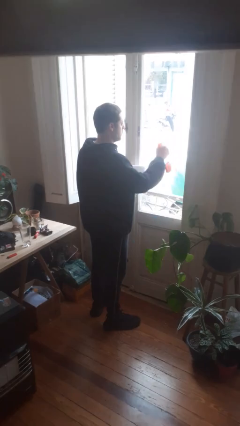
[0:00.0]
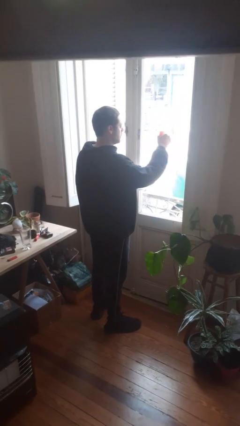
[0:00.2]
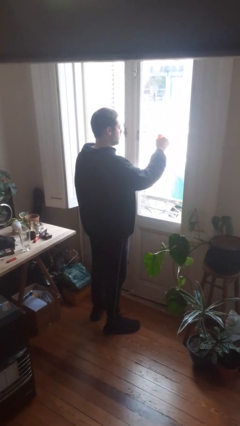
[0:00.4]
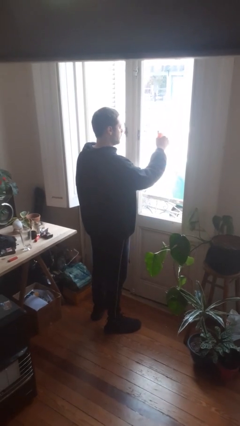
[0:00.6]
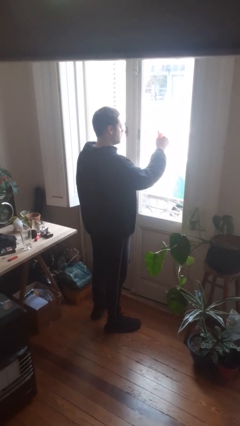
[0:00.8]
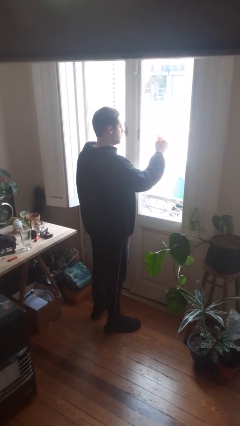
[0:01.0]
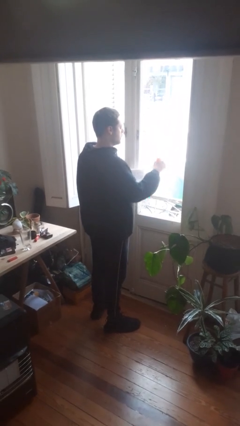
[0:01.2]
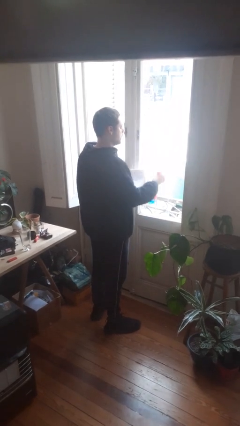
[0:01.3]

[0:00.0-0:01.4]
person sprays from bottle

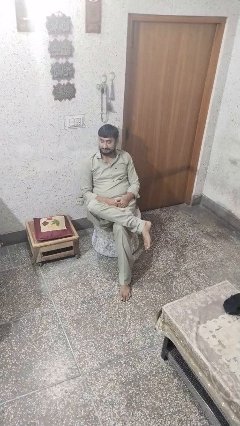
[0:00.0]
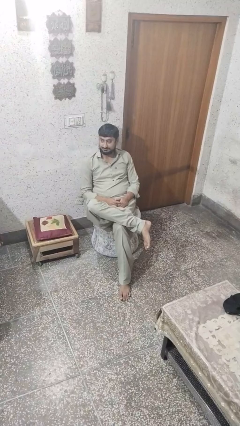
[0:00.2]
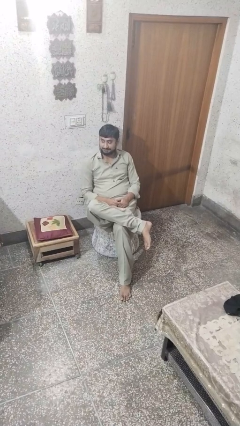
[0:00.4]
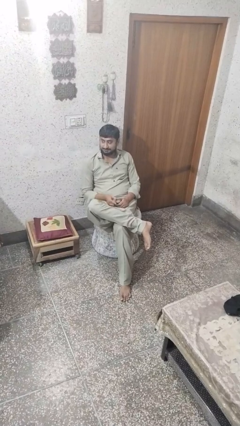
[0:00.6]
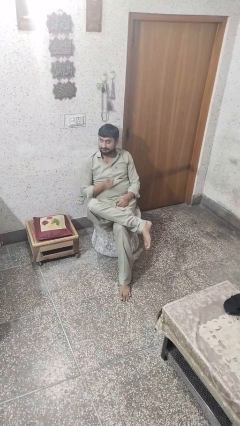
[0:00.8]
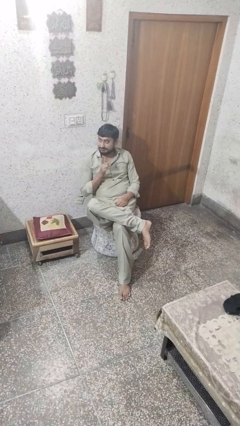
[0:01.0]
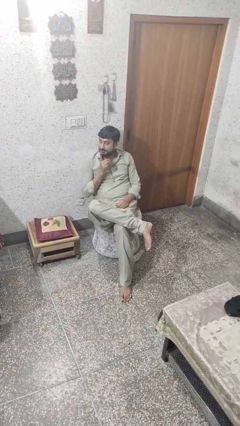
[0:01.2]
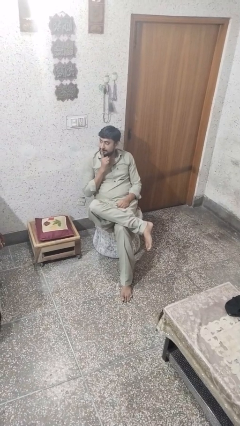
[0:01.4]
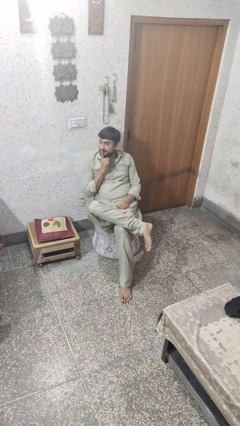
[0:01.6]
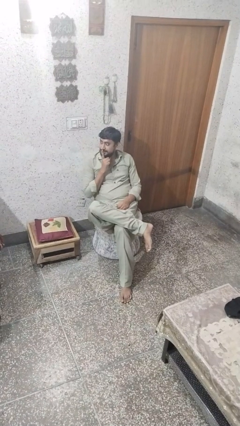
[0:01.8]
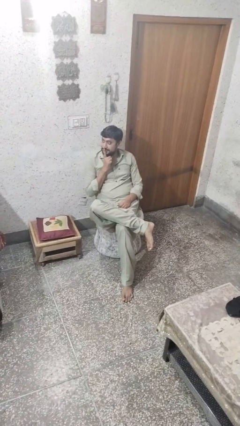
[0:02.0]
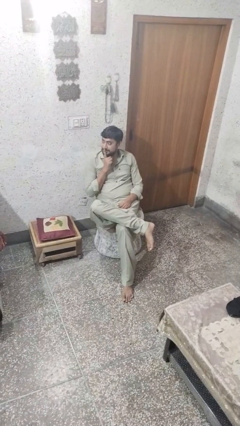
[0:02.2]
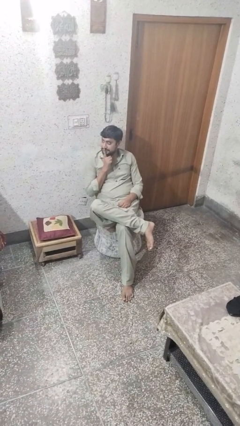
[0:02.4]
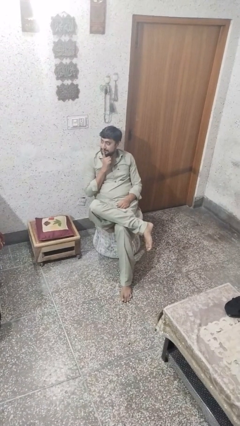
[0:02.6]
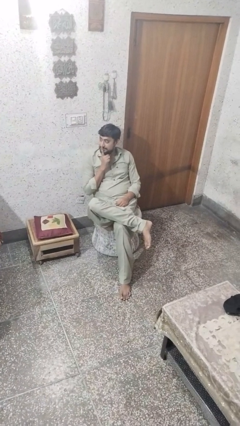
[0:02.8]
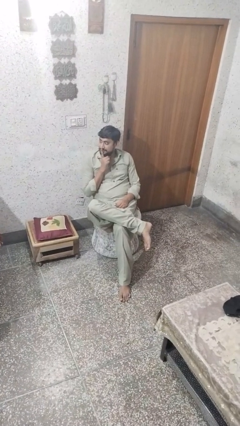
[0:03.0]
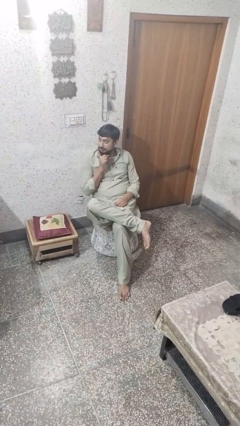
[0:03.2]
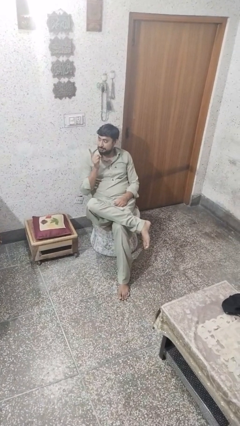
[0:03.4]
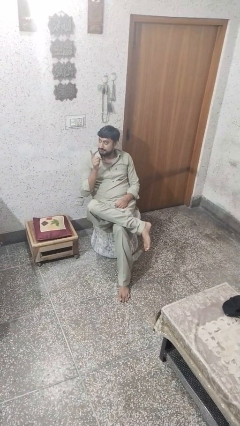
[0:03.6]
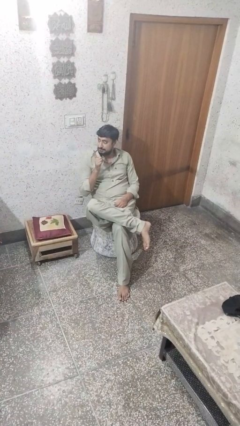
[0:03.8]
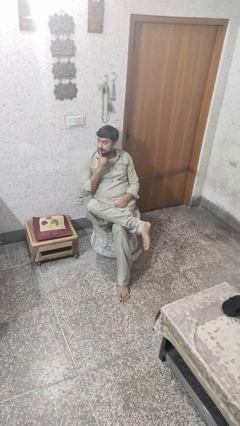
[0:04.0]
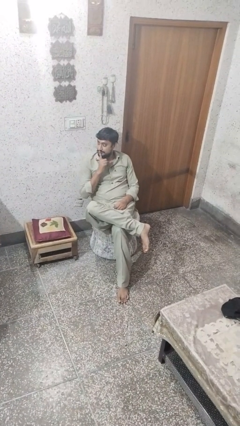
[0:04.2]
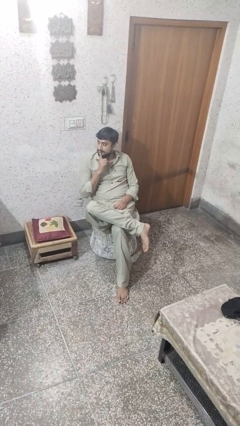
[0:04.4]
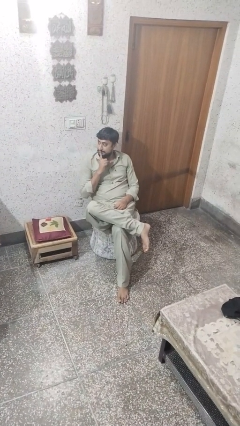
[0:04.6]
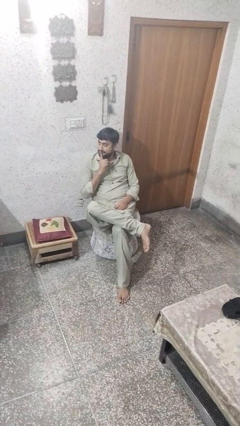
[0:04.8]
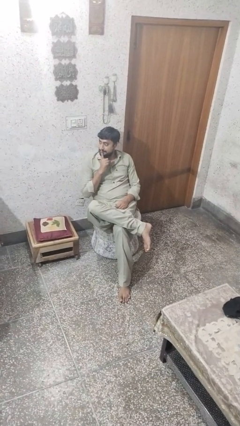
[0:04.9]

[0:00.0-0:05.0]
person gestures be quiet

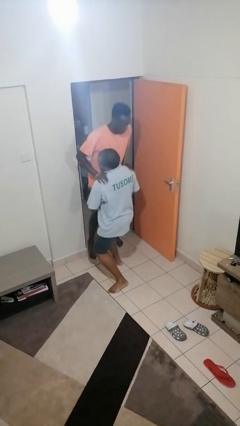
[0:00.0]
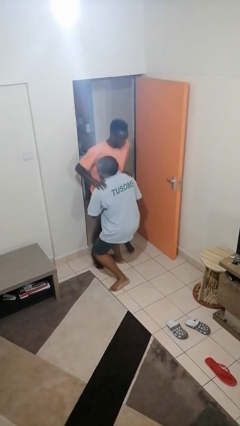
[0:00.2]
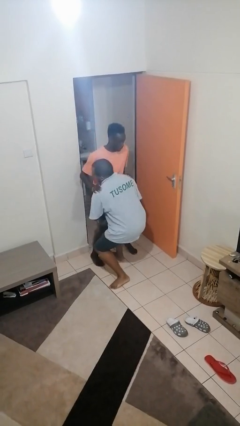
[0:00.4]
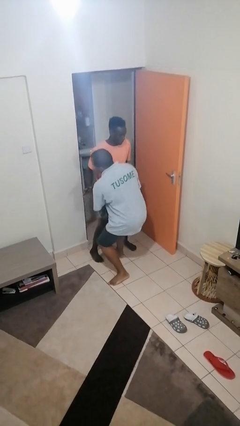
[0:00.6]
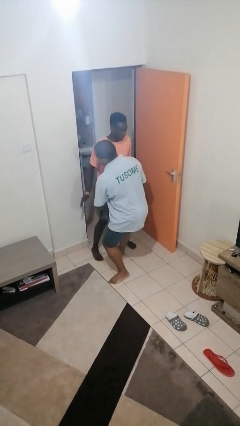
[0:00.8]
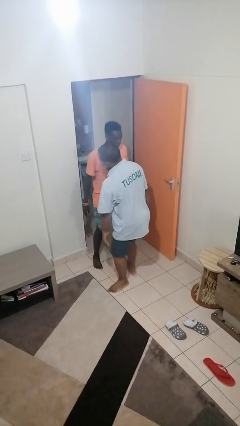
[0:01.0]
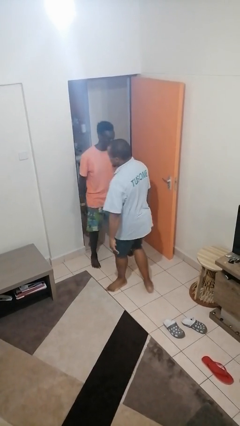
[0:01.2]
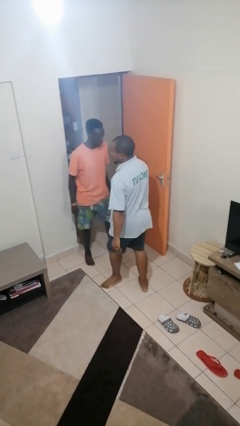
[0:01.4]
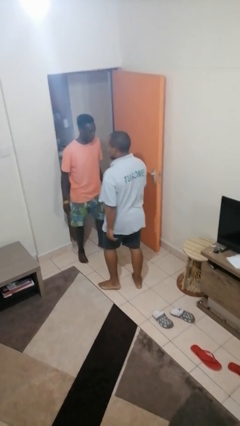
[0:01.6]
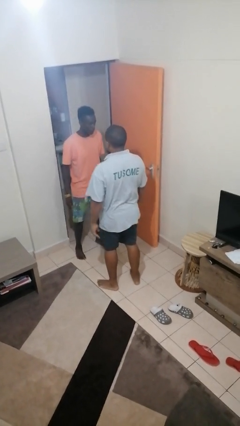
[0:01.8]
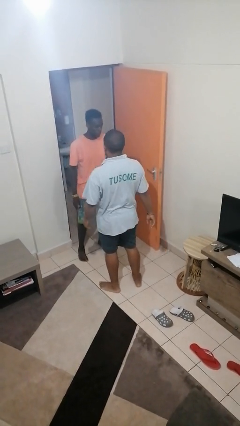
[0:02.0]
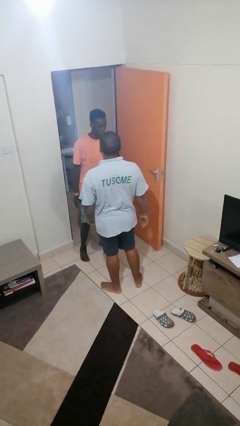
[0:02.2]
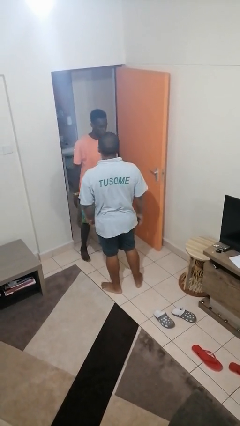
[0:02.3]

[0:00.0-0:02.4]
person puts down person

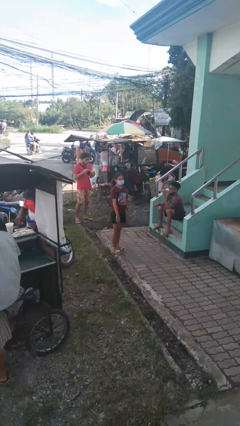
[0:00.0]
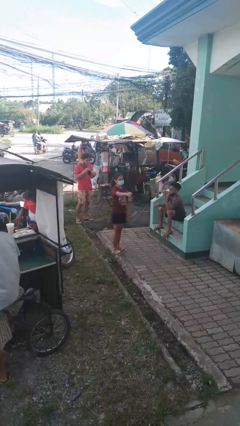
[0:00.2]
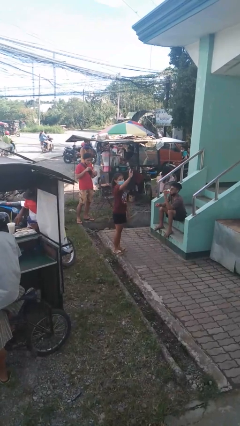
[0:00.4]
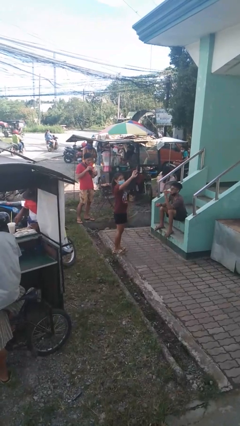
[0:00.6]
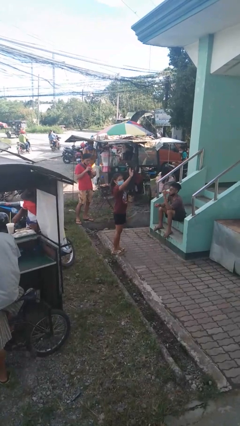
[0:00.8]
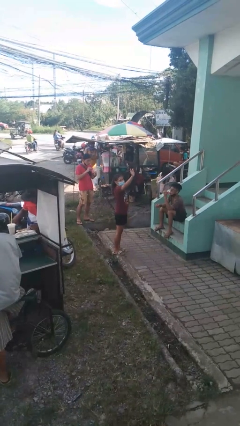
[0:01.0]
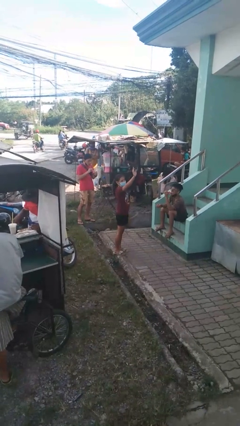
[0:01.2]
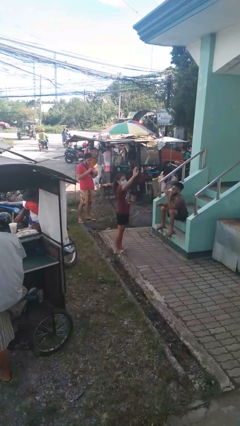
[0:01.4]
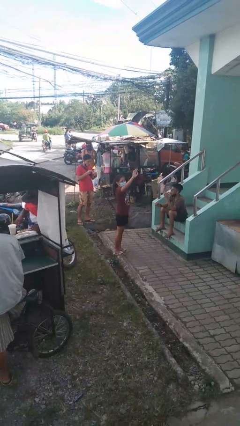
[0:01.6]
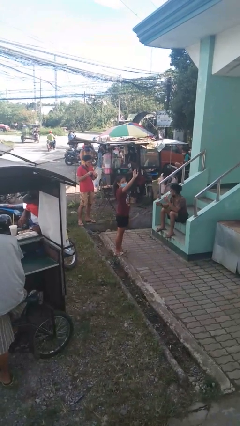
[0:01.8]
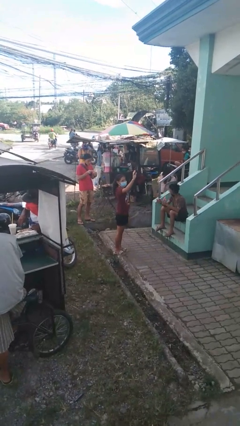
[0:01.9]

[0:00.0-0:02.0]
person waves at person

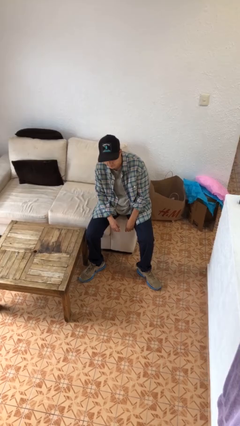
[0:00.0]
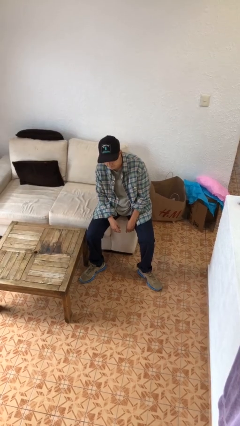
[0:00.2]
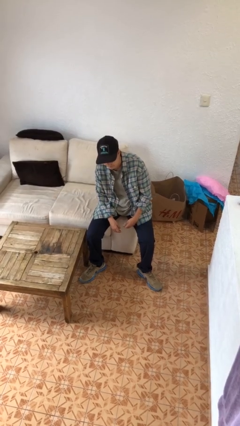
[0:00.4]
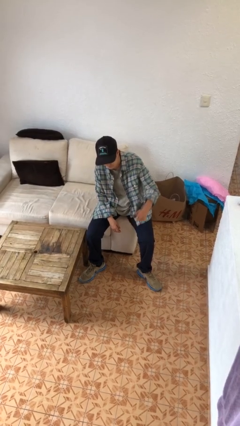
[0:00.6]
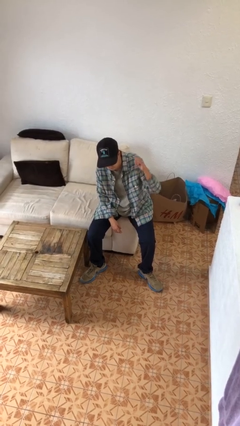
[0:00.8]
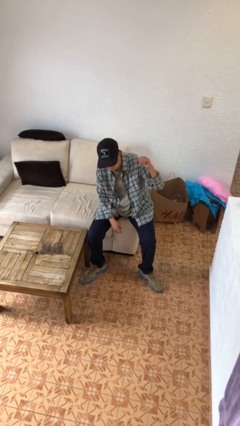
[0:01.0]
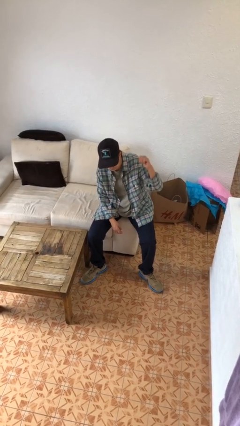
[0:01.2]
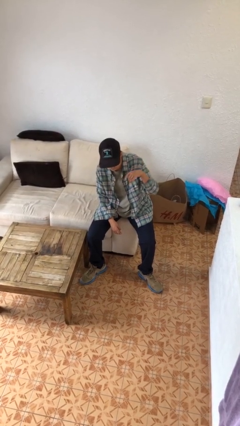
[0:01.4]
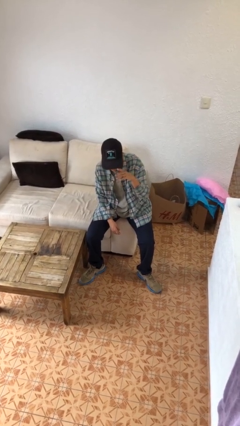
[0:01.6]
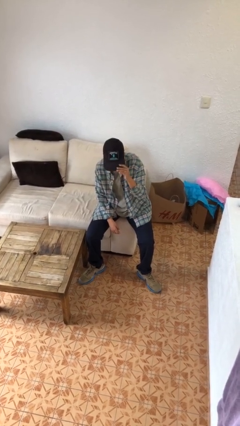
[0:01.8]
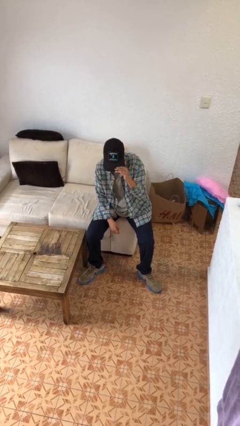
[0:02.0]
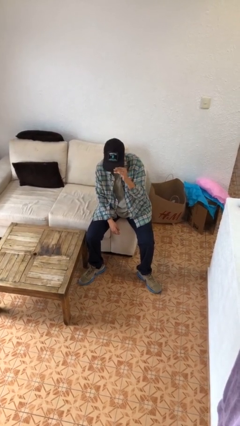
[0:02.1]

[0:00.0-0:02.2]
person gestures behind me

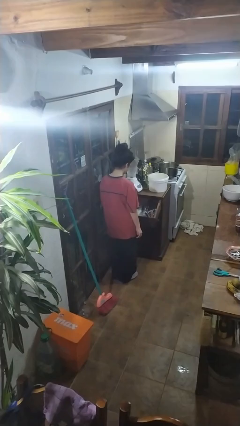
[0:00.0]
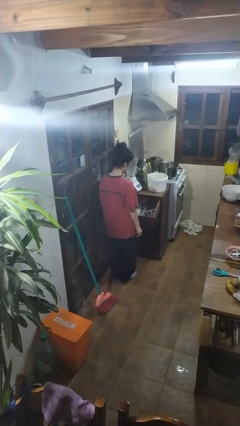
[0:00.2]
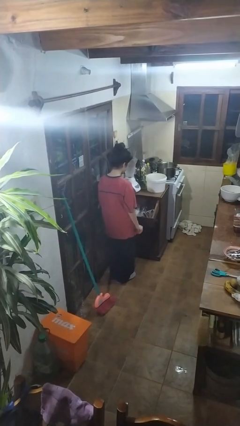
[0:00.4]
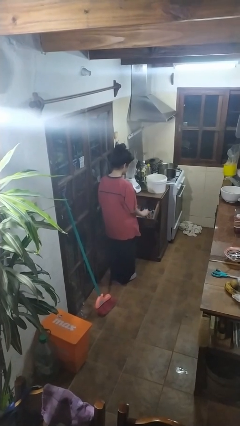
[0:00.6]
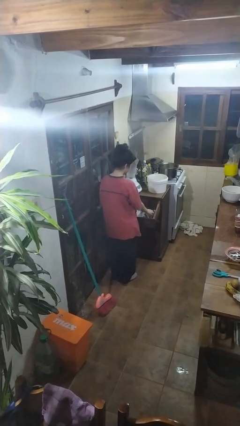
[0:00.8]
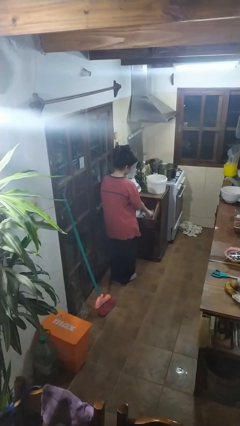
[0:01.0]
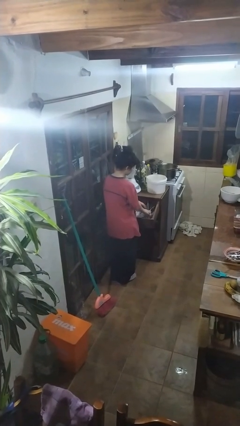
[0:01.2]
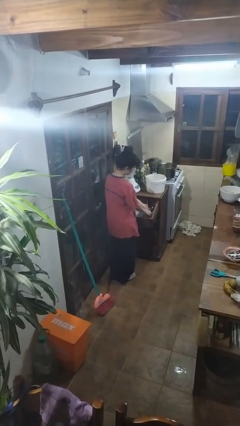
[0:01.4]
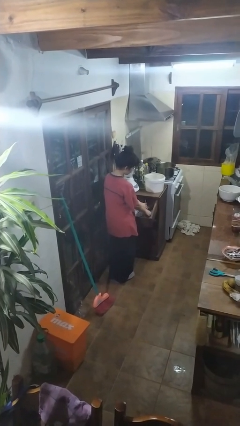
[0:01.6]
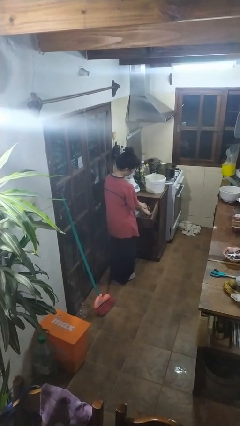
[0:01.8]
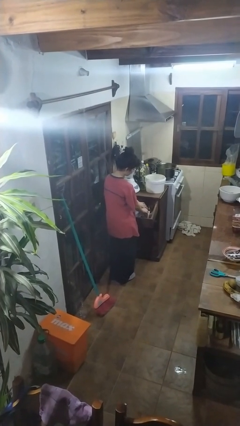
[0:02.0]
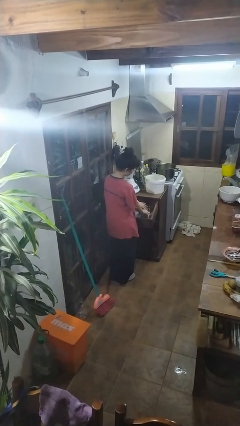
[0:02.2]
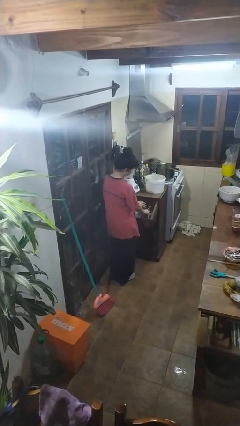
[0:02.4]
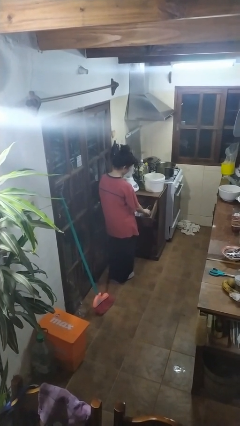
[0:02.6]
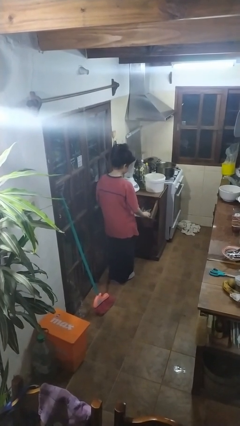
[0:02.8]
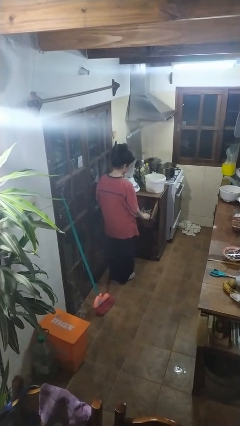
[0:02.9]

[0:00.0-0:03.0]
person searches in kitchen drawer

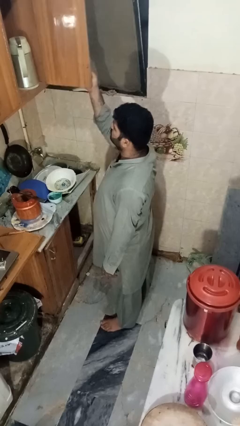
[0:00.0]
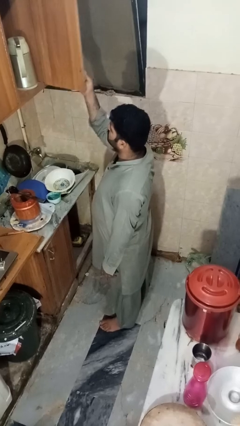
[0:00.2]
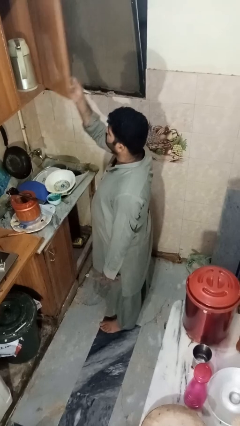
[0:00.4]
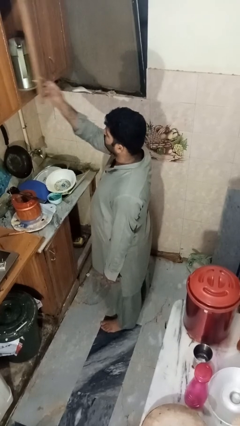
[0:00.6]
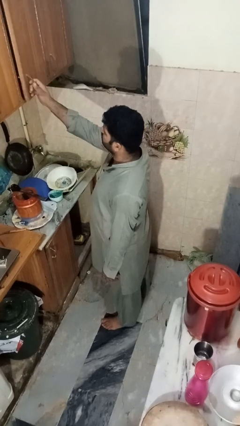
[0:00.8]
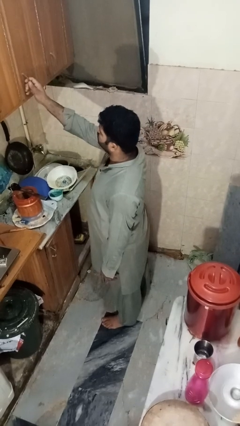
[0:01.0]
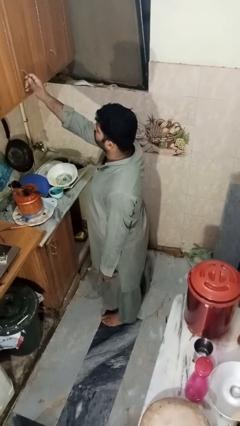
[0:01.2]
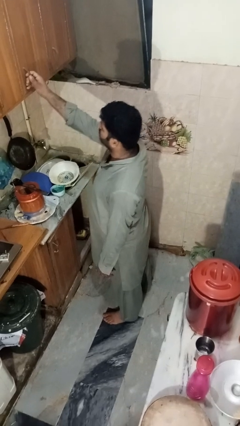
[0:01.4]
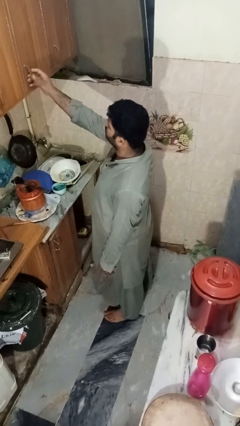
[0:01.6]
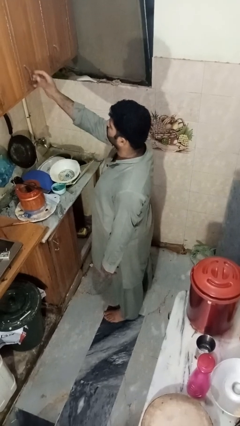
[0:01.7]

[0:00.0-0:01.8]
person closes cabinet
